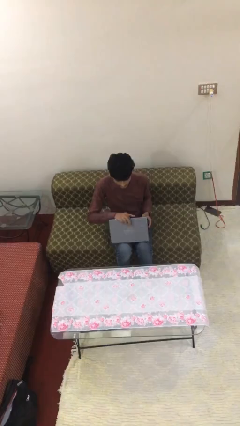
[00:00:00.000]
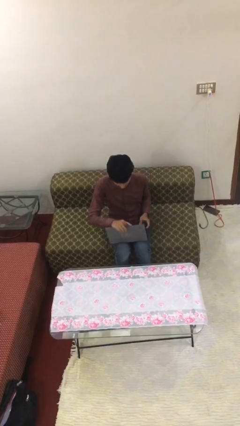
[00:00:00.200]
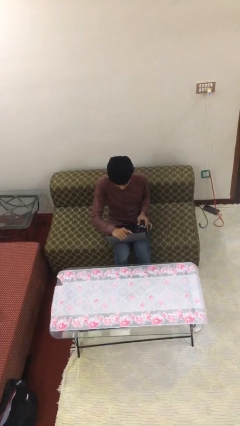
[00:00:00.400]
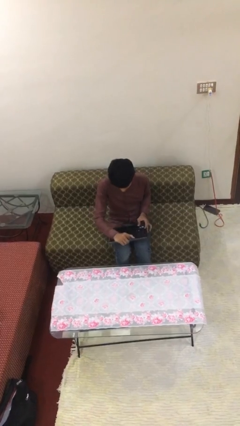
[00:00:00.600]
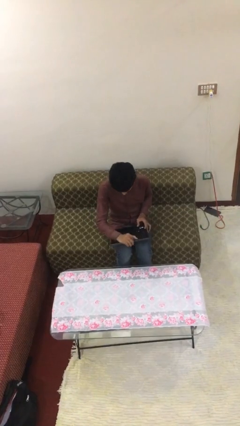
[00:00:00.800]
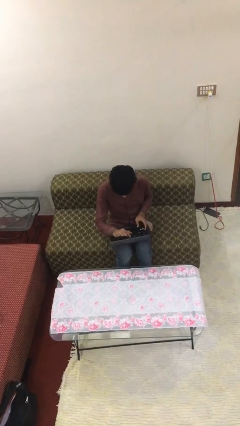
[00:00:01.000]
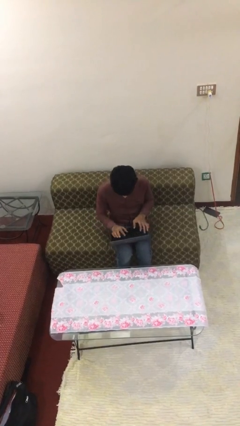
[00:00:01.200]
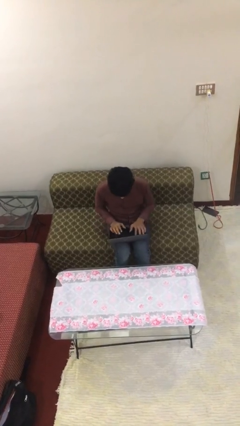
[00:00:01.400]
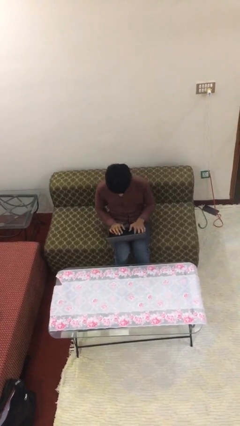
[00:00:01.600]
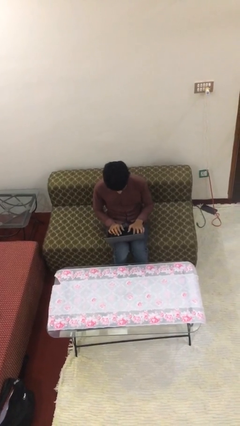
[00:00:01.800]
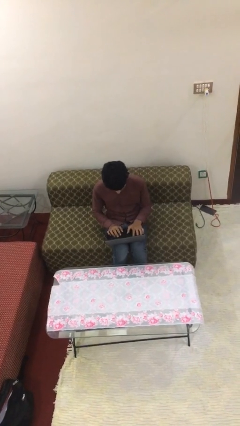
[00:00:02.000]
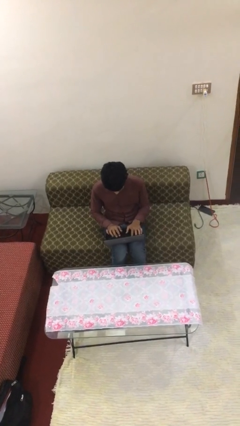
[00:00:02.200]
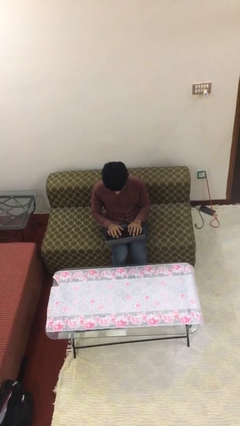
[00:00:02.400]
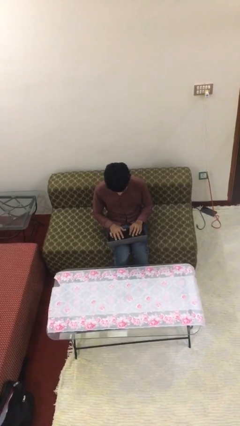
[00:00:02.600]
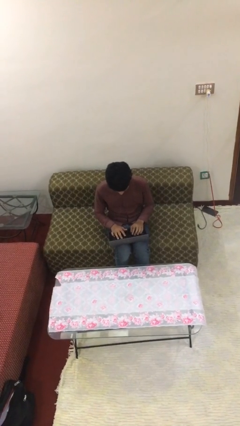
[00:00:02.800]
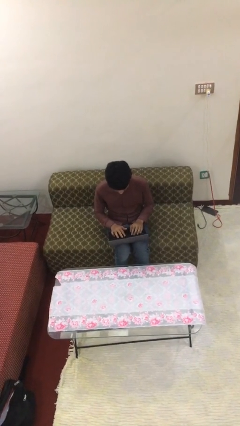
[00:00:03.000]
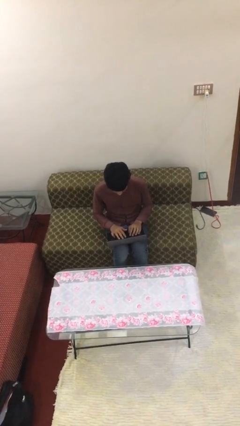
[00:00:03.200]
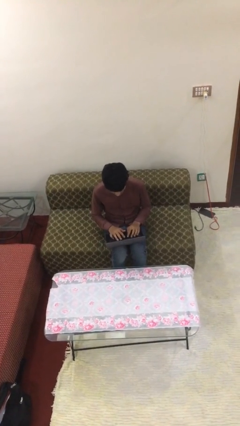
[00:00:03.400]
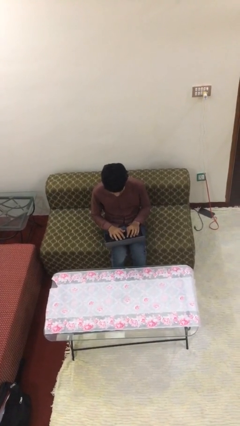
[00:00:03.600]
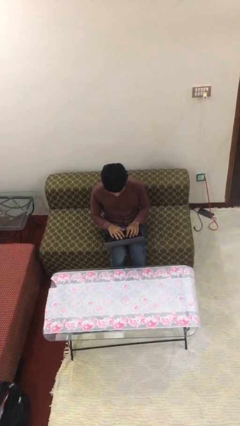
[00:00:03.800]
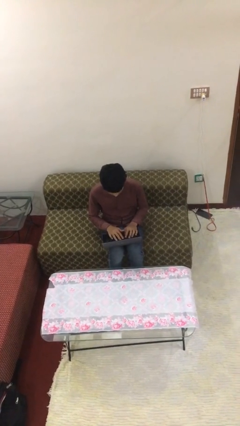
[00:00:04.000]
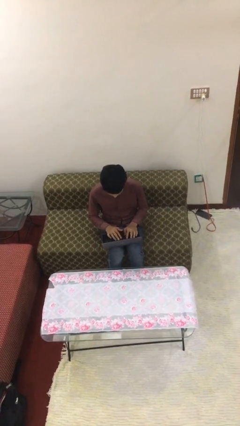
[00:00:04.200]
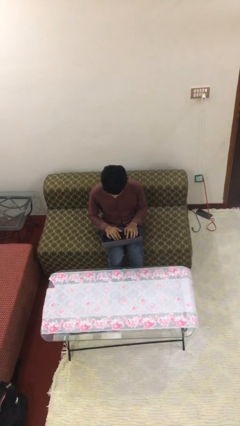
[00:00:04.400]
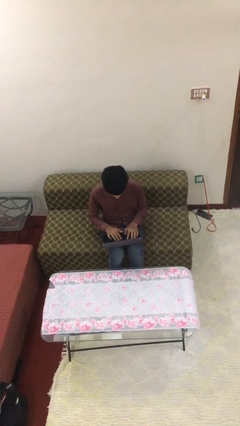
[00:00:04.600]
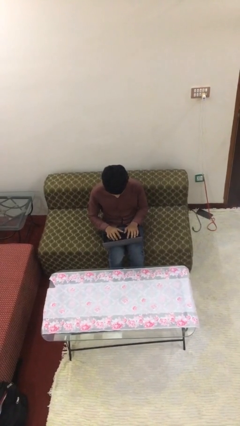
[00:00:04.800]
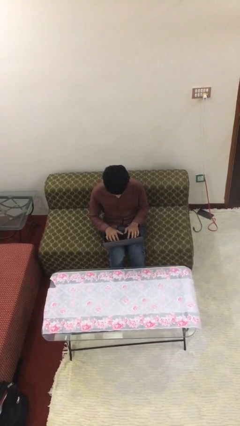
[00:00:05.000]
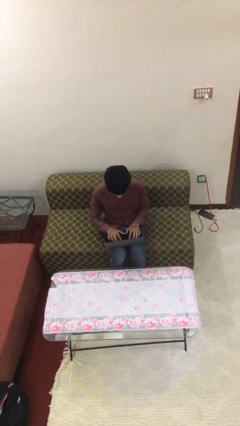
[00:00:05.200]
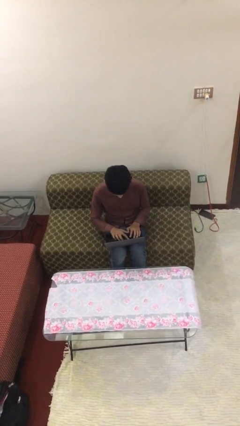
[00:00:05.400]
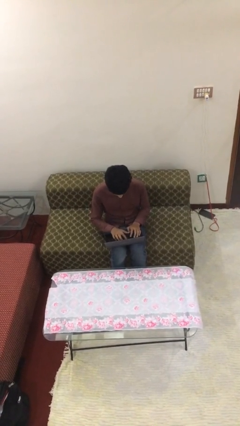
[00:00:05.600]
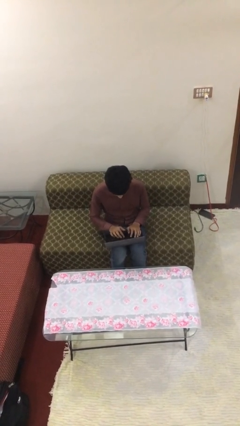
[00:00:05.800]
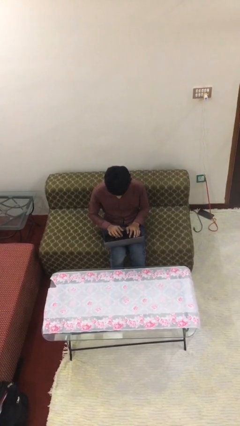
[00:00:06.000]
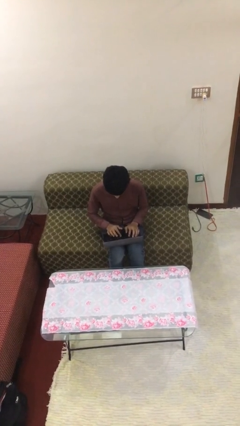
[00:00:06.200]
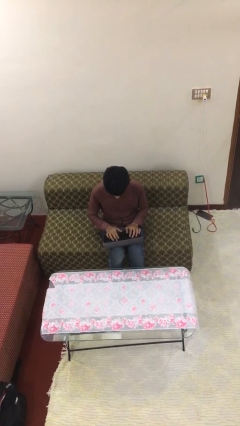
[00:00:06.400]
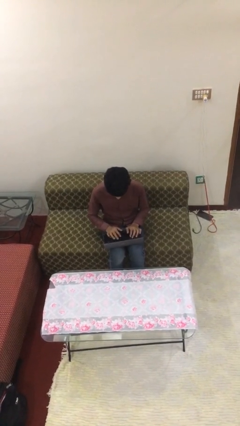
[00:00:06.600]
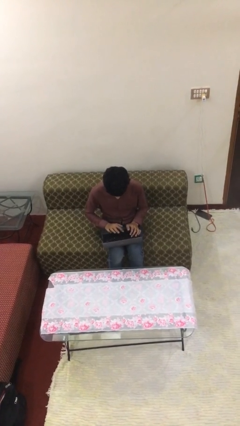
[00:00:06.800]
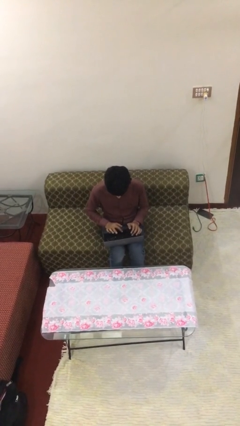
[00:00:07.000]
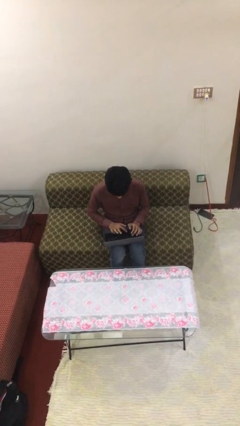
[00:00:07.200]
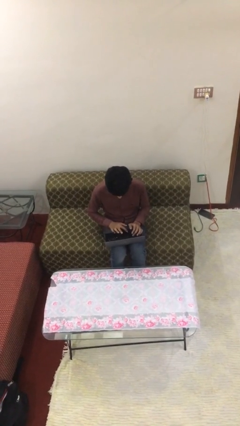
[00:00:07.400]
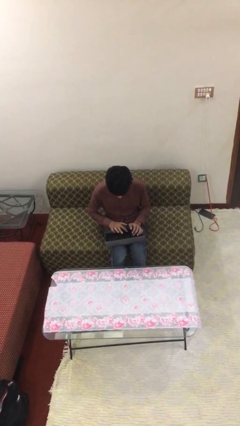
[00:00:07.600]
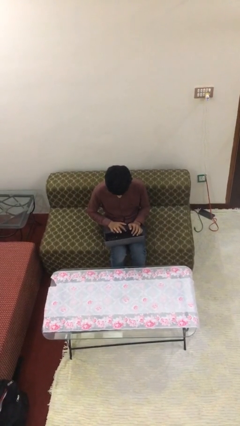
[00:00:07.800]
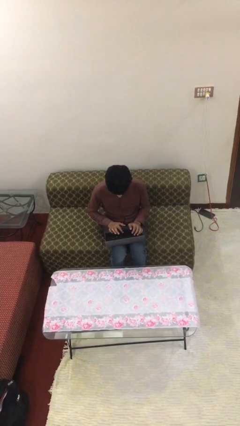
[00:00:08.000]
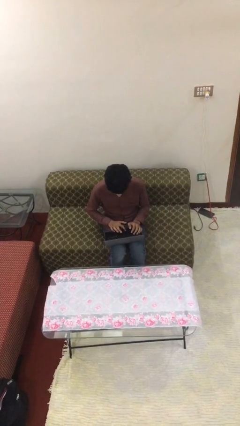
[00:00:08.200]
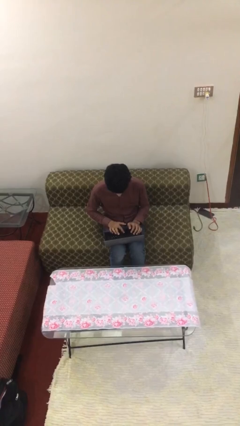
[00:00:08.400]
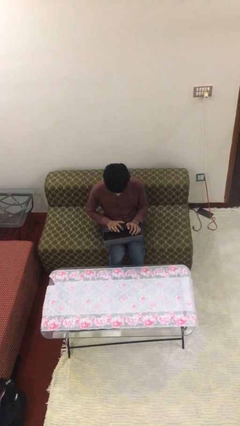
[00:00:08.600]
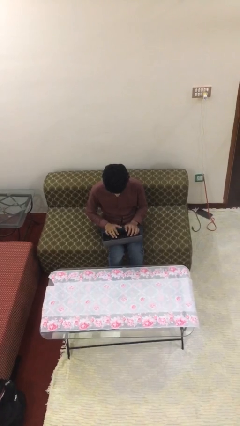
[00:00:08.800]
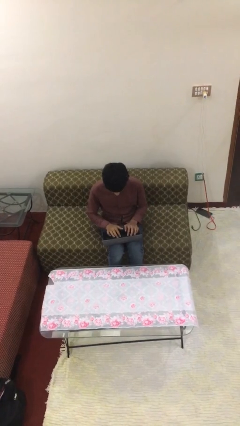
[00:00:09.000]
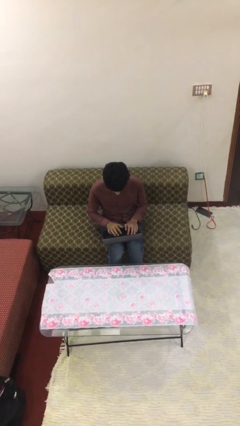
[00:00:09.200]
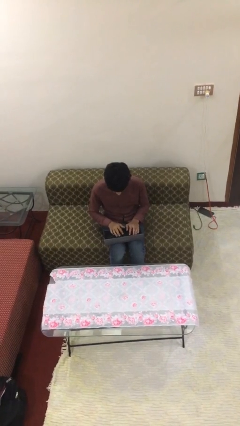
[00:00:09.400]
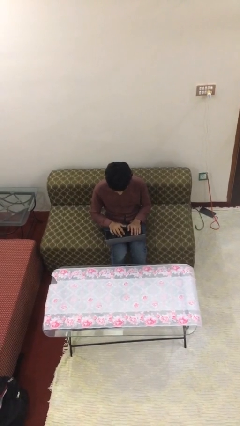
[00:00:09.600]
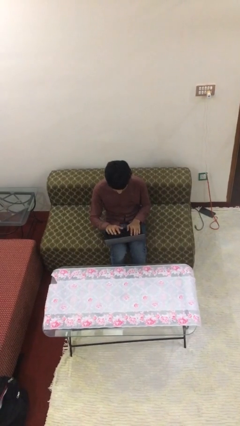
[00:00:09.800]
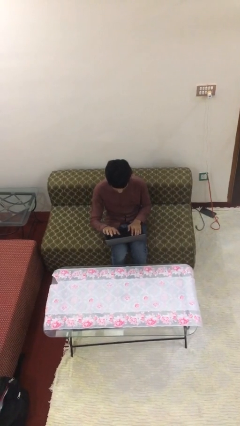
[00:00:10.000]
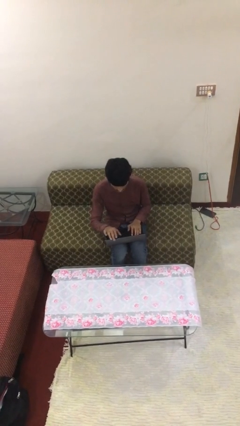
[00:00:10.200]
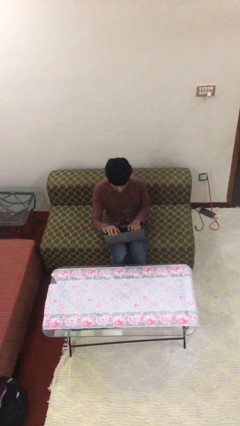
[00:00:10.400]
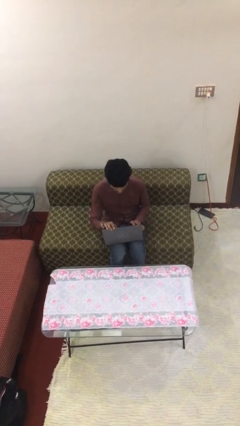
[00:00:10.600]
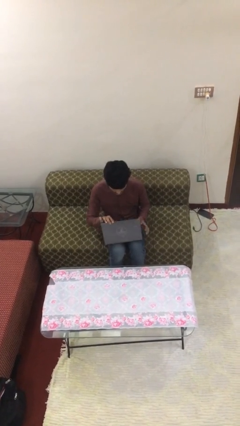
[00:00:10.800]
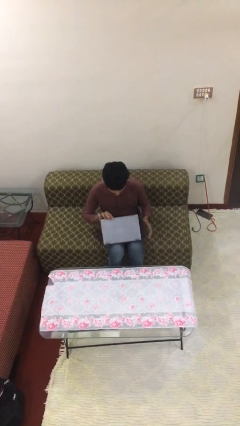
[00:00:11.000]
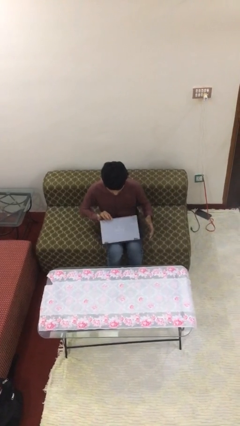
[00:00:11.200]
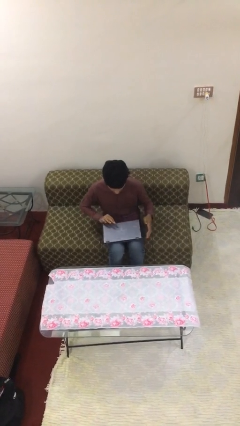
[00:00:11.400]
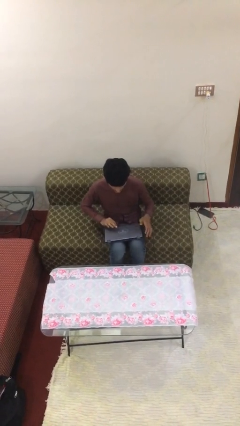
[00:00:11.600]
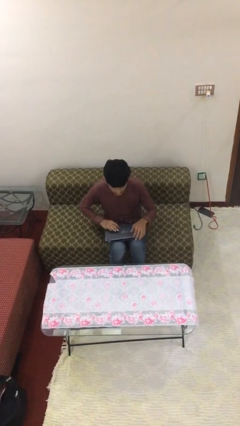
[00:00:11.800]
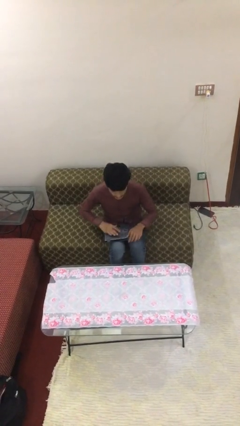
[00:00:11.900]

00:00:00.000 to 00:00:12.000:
person interacts with laptop

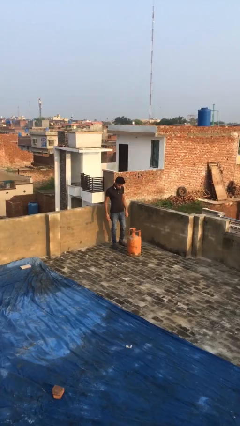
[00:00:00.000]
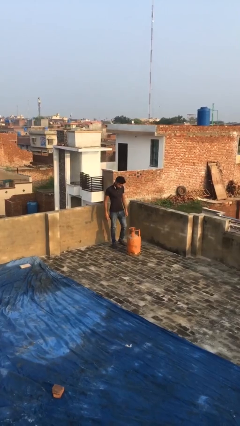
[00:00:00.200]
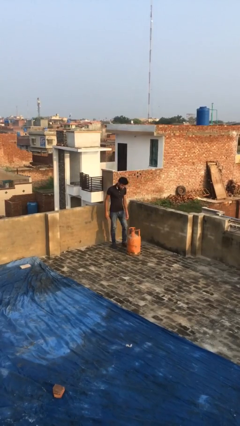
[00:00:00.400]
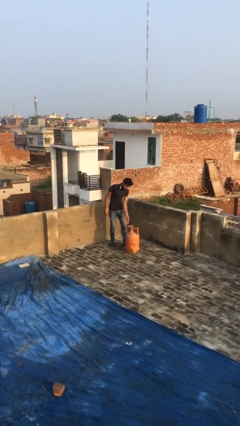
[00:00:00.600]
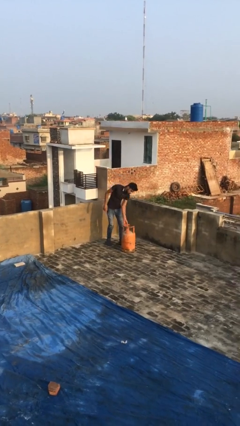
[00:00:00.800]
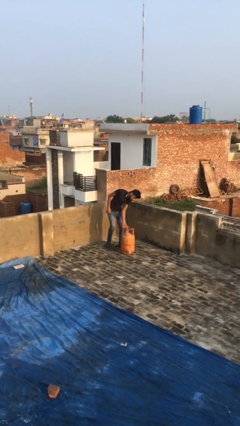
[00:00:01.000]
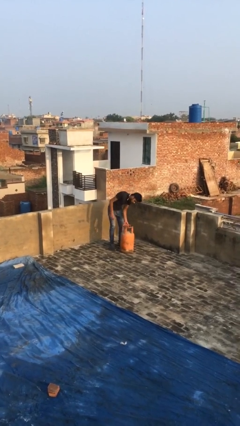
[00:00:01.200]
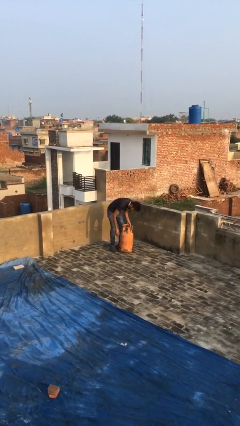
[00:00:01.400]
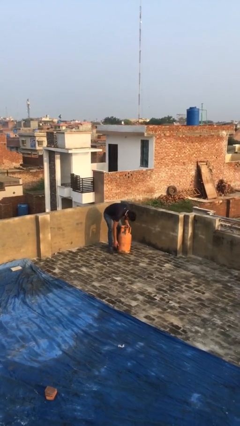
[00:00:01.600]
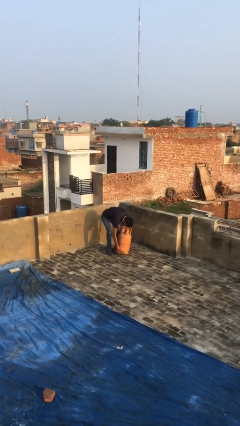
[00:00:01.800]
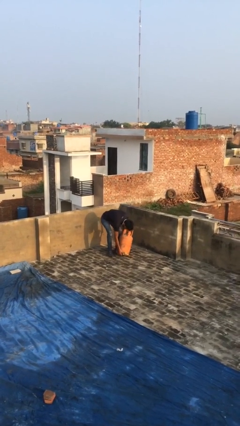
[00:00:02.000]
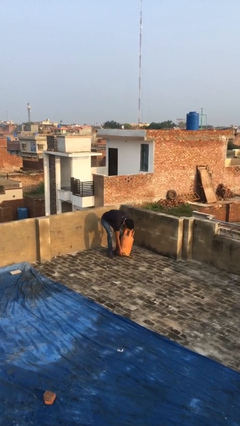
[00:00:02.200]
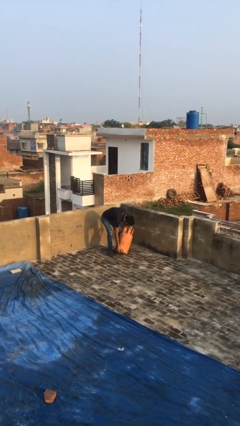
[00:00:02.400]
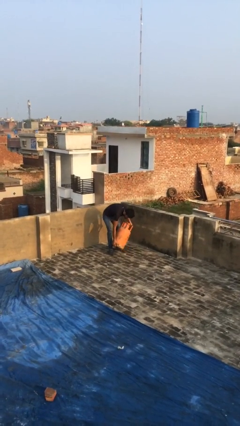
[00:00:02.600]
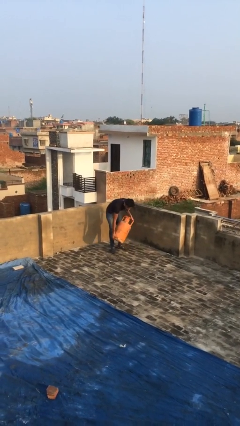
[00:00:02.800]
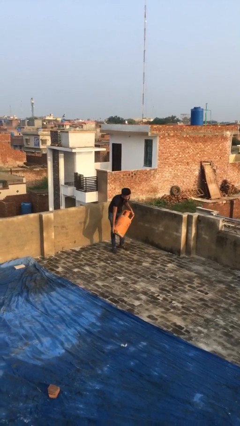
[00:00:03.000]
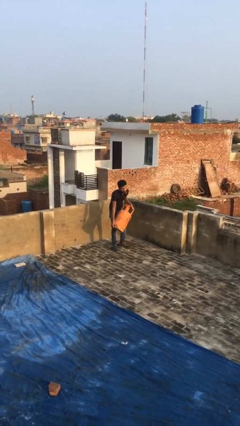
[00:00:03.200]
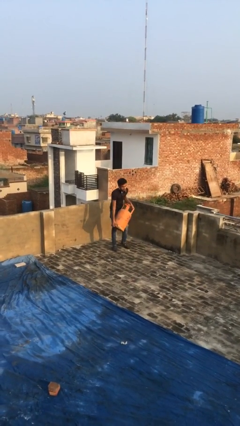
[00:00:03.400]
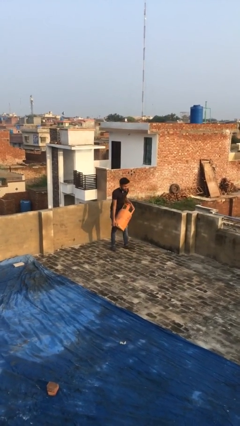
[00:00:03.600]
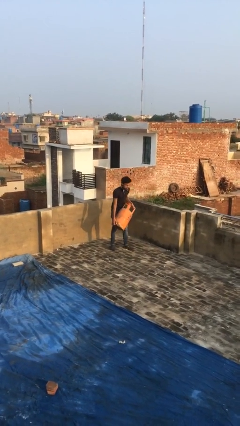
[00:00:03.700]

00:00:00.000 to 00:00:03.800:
person picks up object from floor

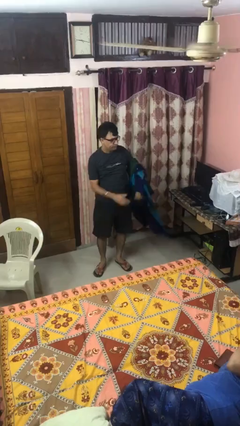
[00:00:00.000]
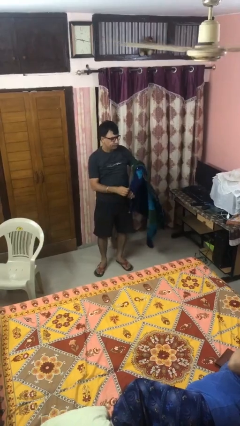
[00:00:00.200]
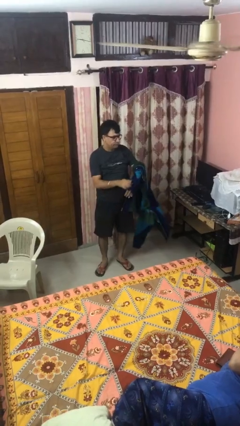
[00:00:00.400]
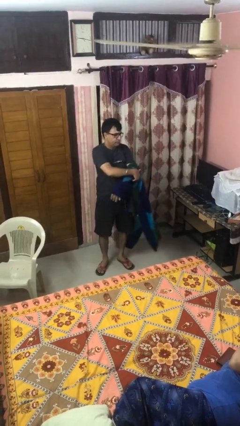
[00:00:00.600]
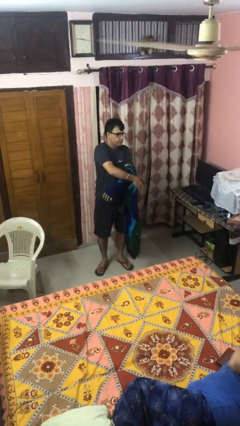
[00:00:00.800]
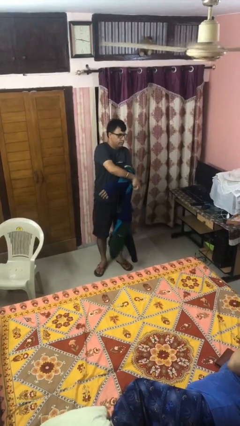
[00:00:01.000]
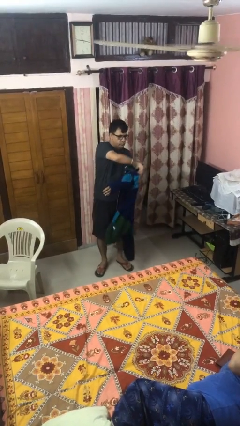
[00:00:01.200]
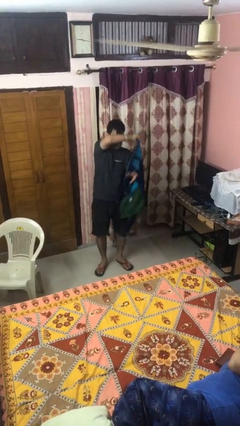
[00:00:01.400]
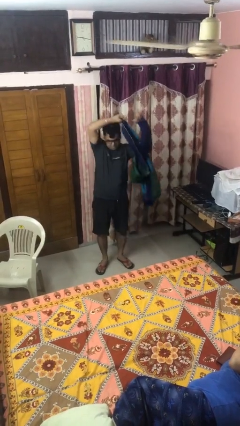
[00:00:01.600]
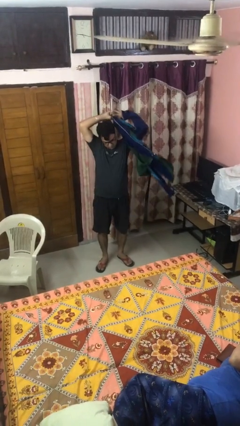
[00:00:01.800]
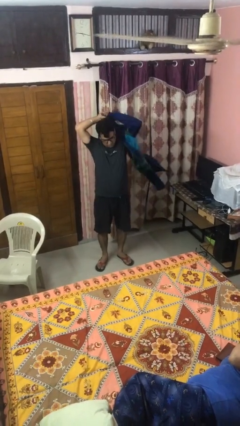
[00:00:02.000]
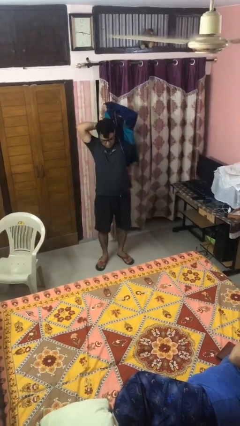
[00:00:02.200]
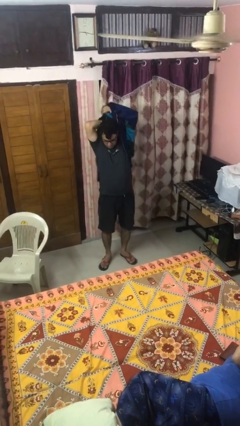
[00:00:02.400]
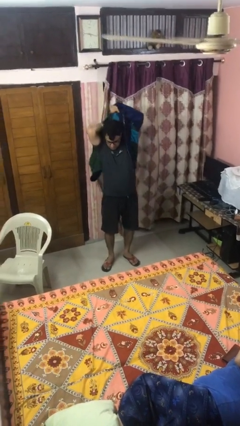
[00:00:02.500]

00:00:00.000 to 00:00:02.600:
person takes off jacket
